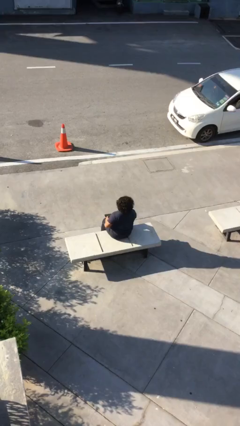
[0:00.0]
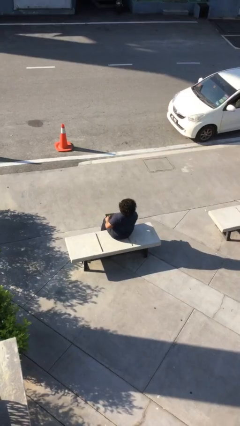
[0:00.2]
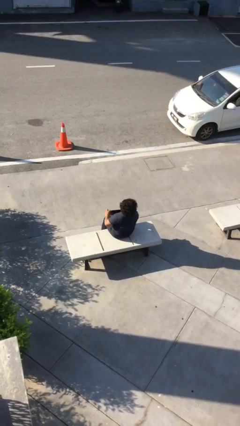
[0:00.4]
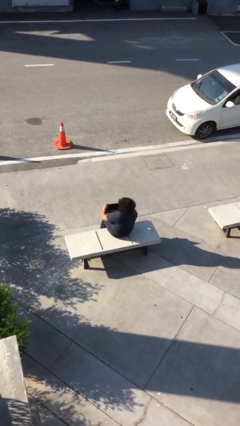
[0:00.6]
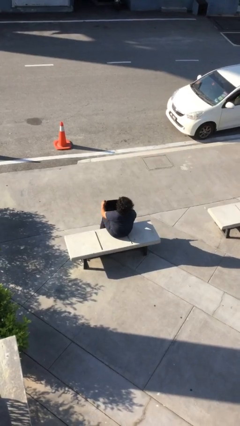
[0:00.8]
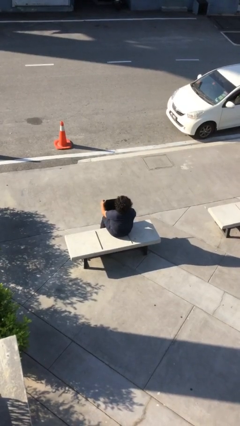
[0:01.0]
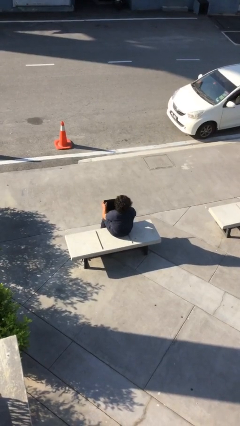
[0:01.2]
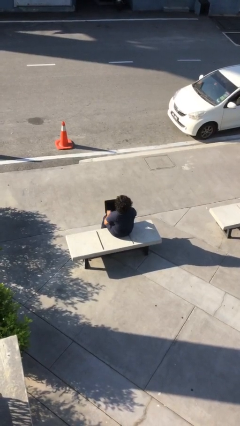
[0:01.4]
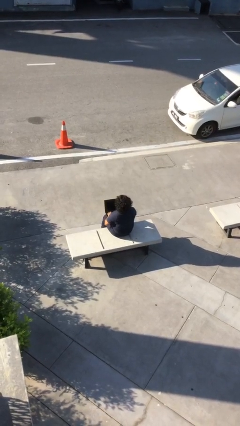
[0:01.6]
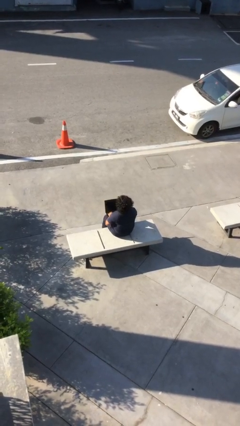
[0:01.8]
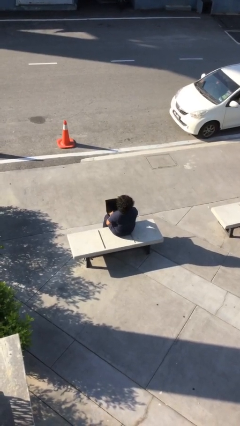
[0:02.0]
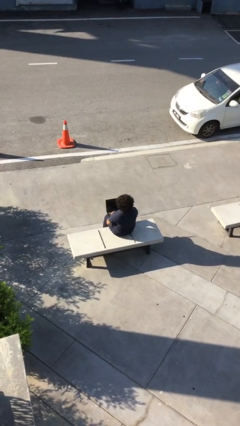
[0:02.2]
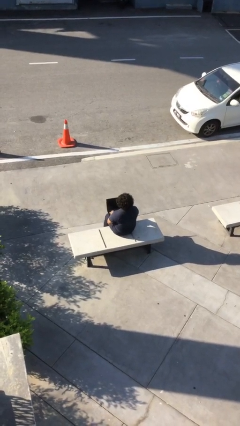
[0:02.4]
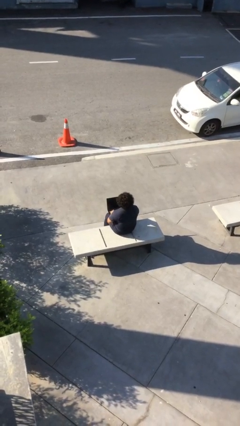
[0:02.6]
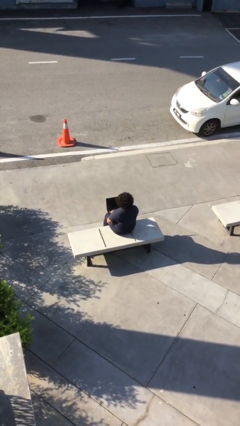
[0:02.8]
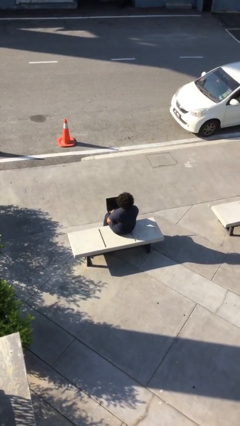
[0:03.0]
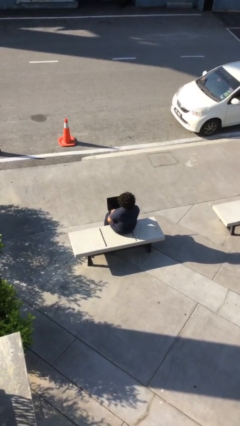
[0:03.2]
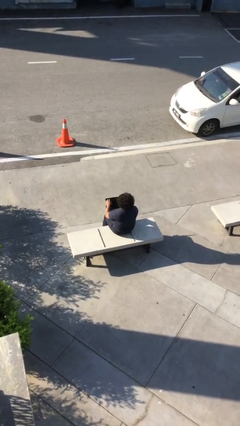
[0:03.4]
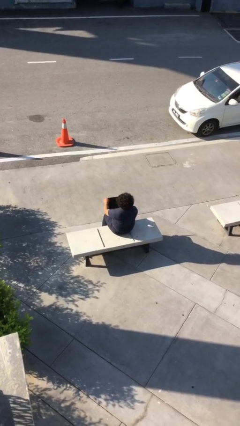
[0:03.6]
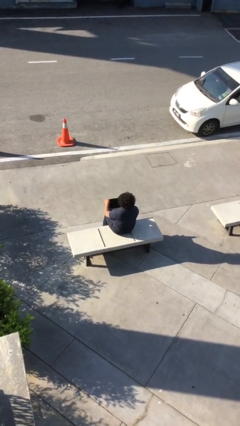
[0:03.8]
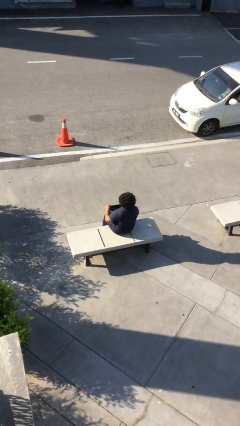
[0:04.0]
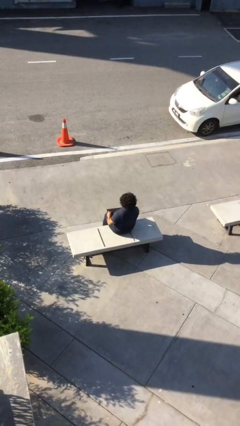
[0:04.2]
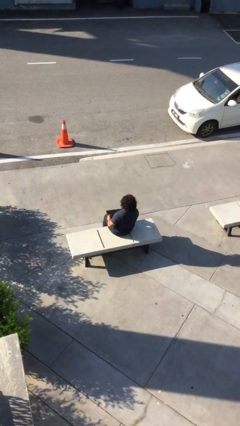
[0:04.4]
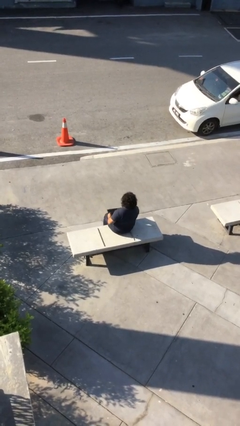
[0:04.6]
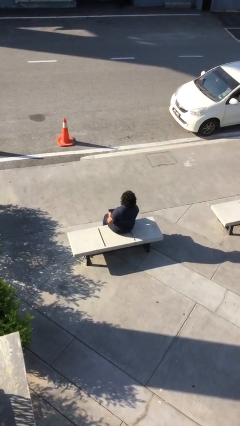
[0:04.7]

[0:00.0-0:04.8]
person interacts with laptop

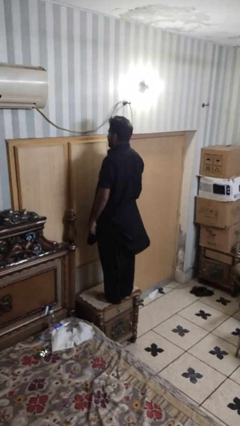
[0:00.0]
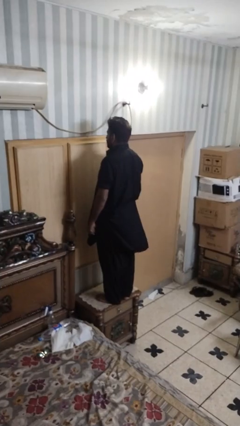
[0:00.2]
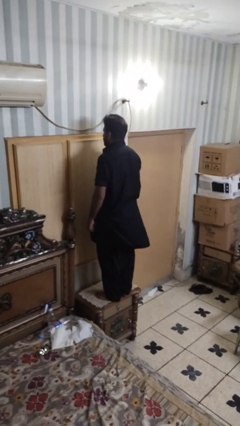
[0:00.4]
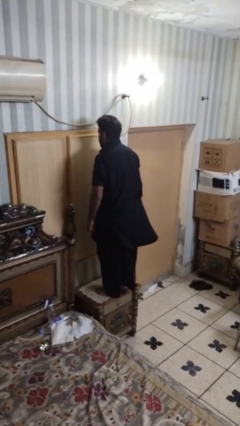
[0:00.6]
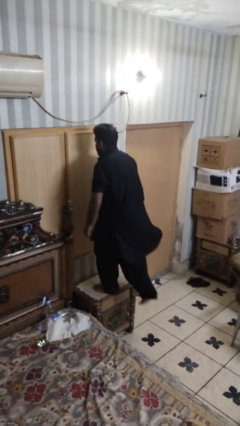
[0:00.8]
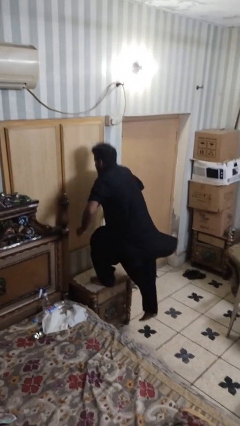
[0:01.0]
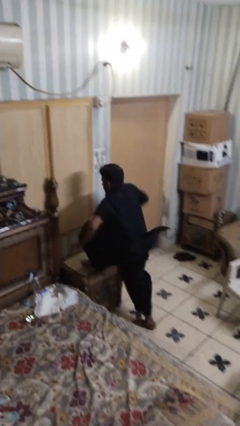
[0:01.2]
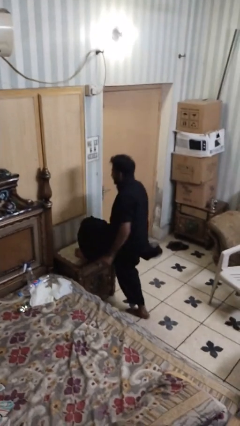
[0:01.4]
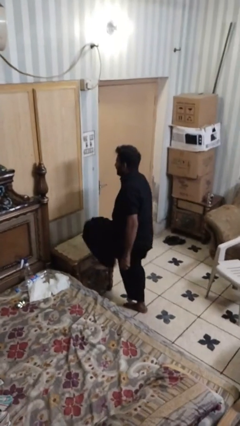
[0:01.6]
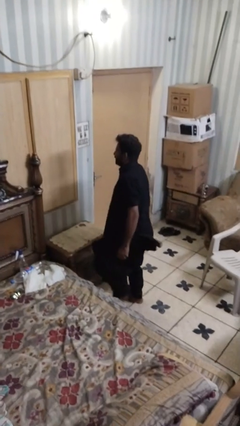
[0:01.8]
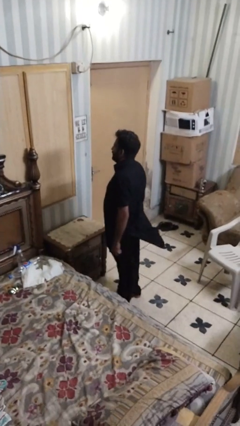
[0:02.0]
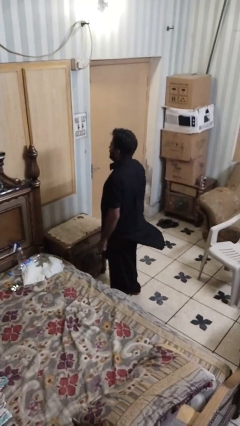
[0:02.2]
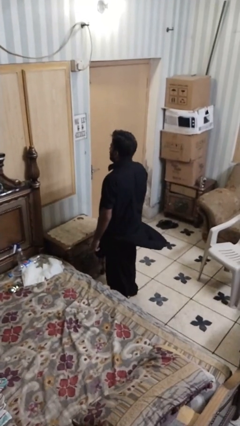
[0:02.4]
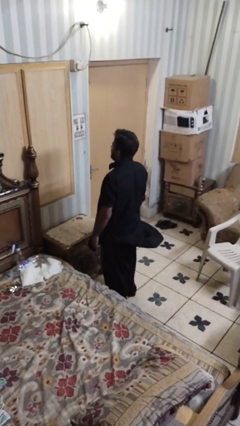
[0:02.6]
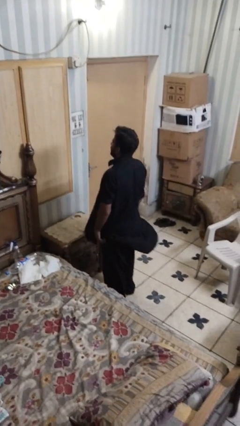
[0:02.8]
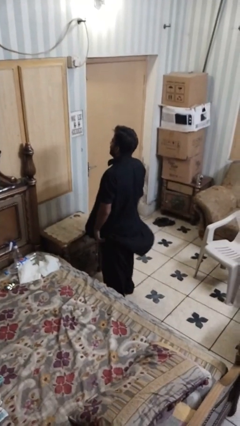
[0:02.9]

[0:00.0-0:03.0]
person climbs off table

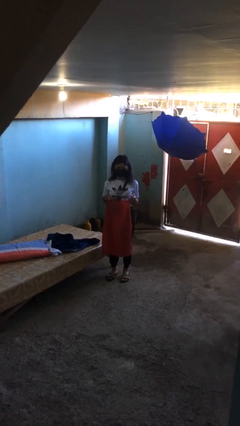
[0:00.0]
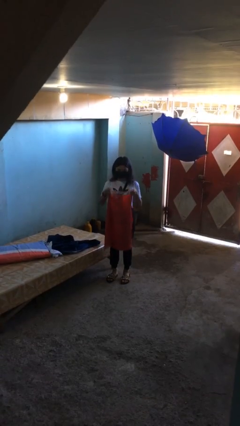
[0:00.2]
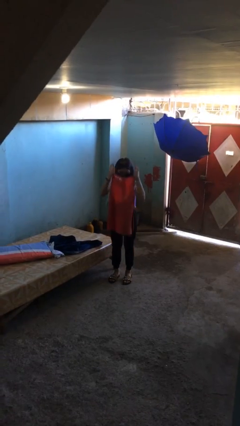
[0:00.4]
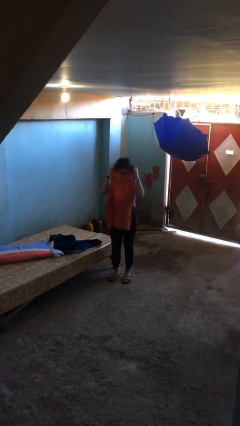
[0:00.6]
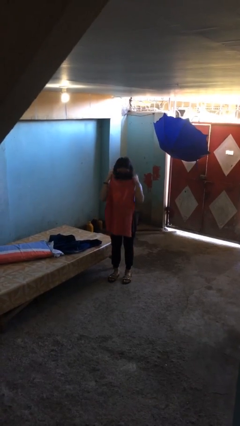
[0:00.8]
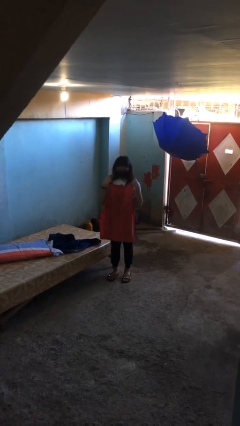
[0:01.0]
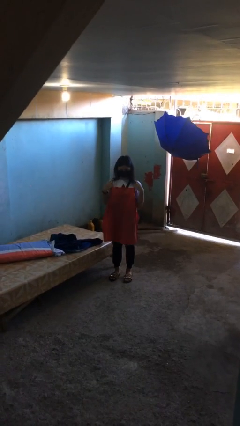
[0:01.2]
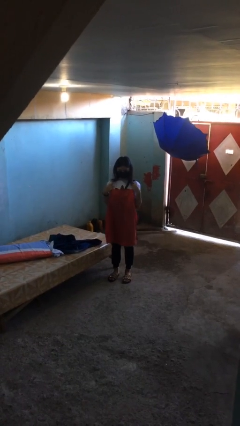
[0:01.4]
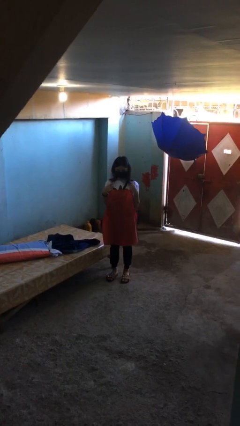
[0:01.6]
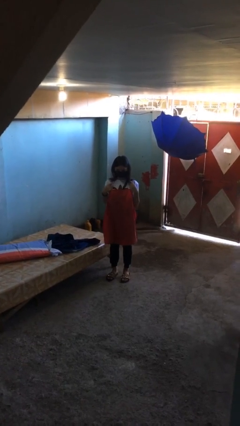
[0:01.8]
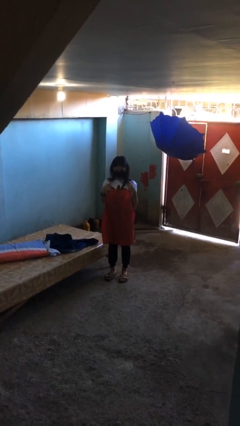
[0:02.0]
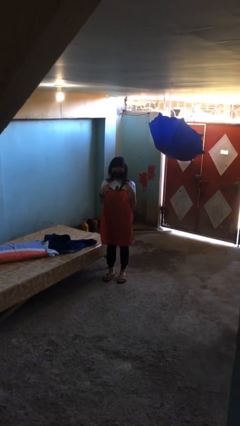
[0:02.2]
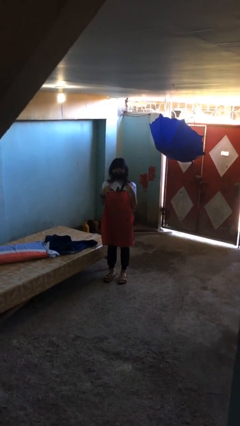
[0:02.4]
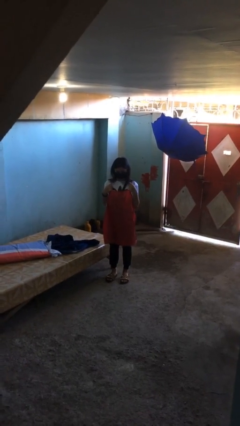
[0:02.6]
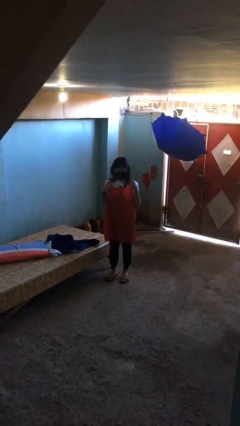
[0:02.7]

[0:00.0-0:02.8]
person puts on apron

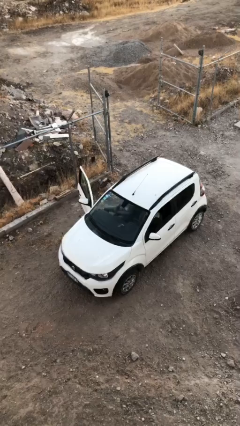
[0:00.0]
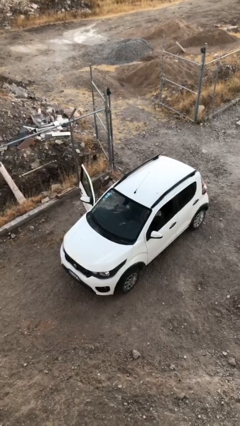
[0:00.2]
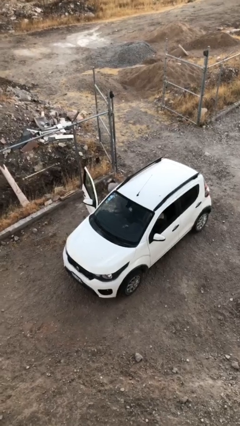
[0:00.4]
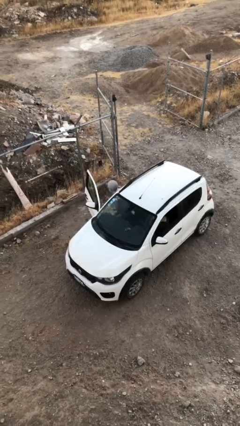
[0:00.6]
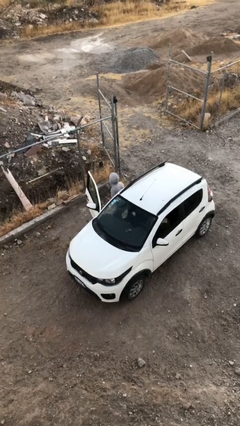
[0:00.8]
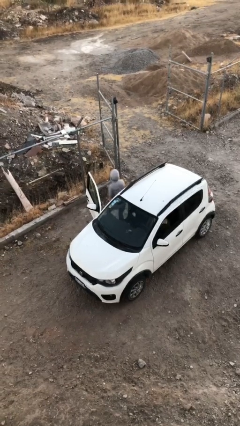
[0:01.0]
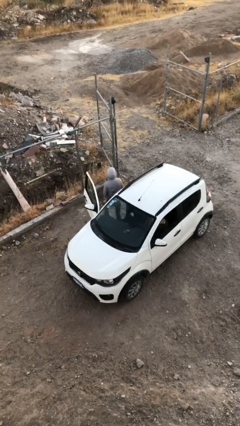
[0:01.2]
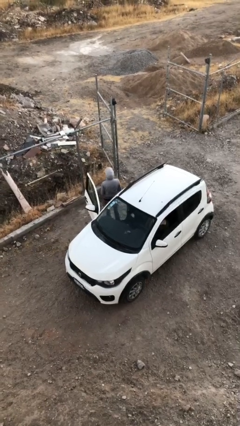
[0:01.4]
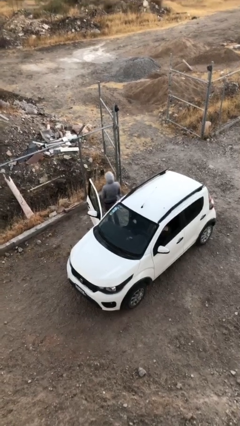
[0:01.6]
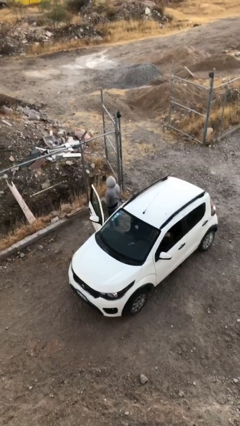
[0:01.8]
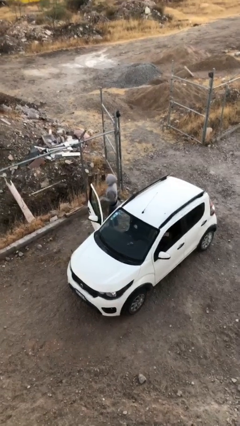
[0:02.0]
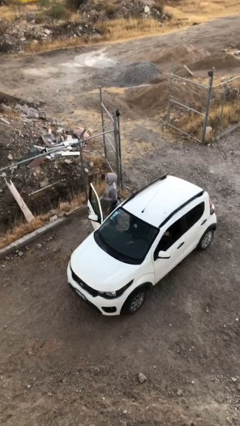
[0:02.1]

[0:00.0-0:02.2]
person exits car

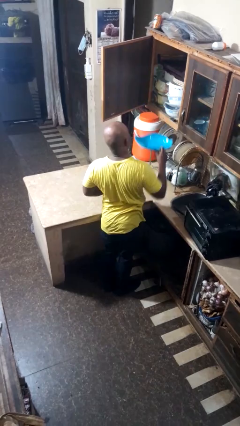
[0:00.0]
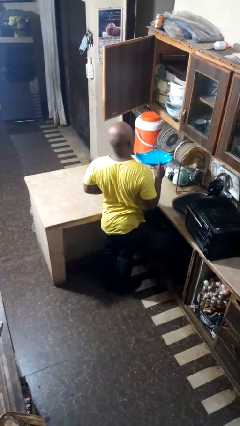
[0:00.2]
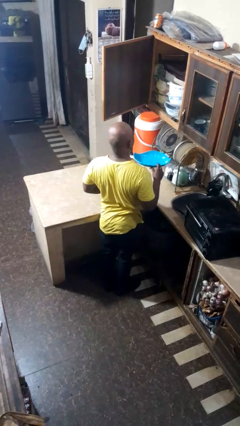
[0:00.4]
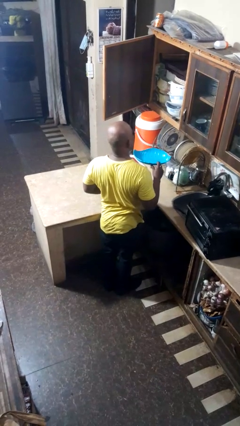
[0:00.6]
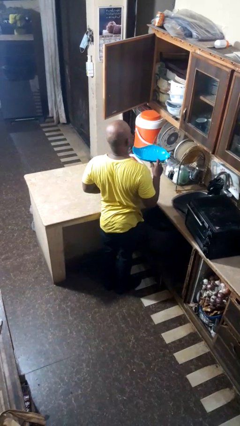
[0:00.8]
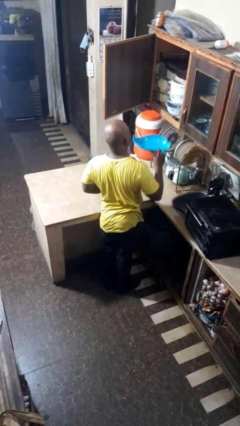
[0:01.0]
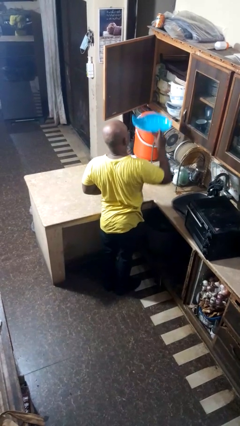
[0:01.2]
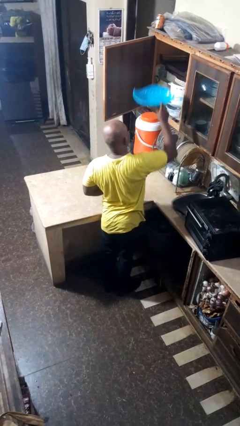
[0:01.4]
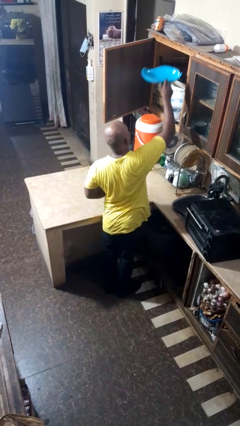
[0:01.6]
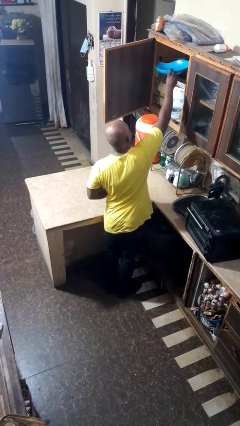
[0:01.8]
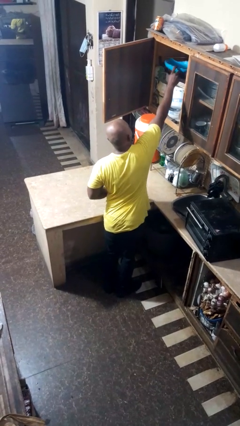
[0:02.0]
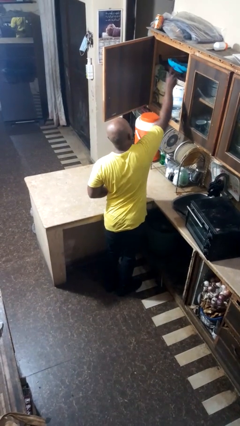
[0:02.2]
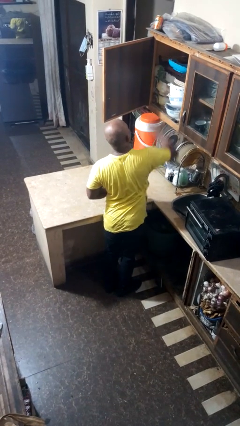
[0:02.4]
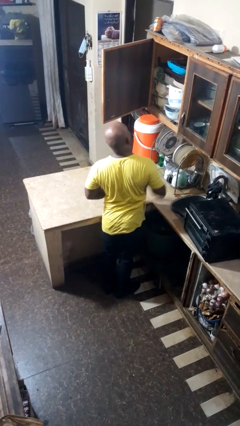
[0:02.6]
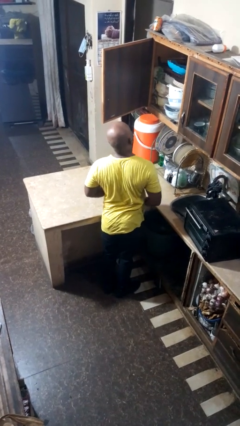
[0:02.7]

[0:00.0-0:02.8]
person puts object in cabinet

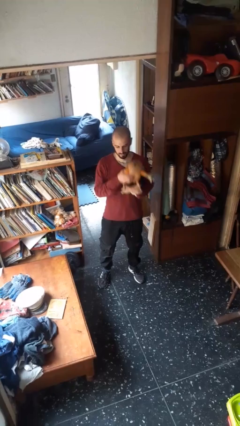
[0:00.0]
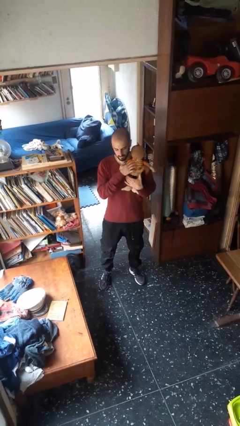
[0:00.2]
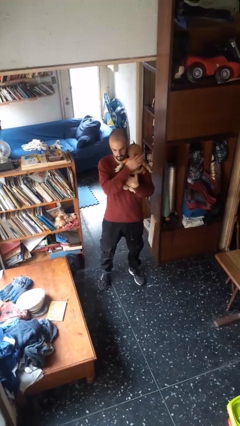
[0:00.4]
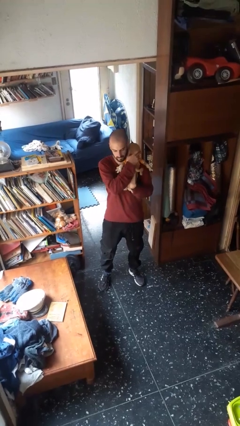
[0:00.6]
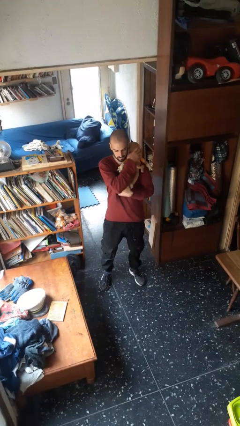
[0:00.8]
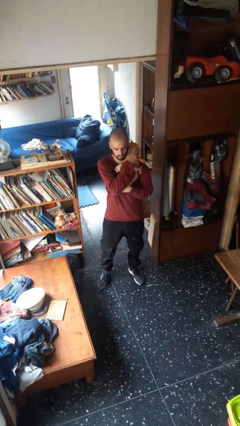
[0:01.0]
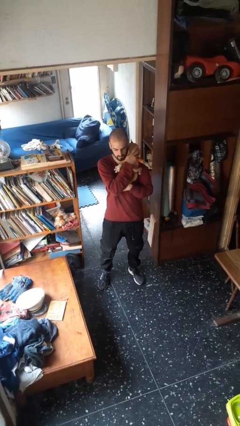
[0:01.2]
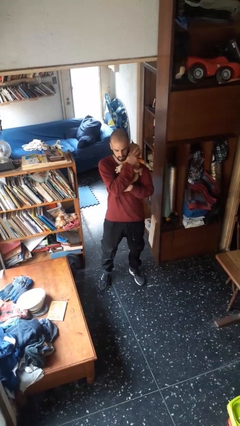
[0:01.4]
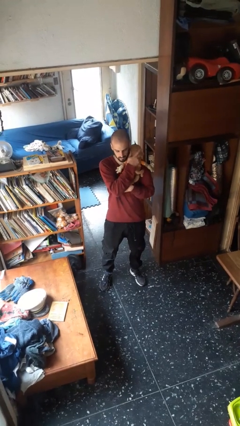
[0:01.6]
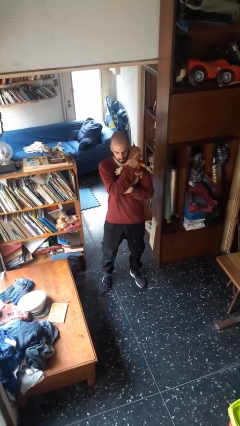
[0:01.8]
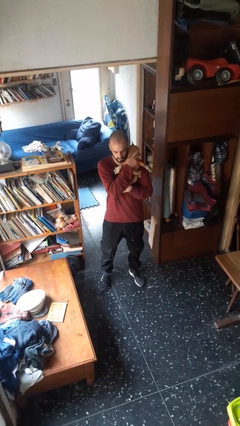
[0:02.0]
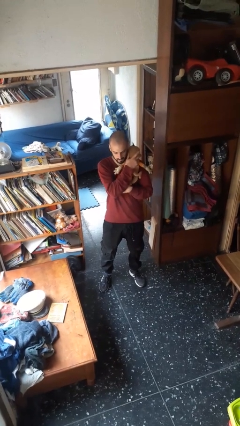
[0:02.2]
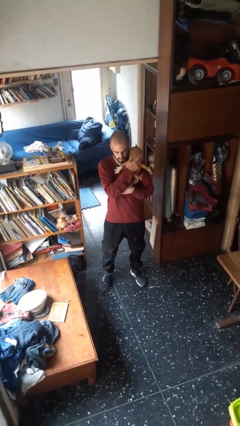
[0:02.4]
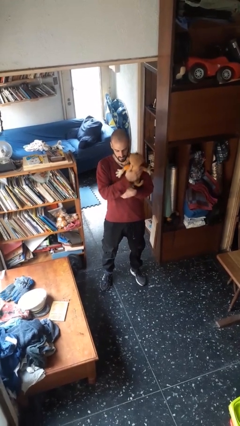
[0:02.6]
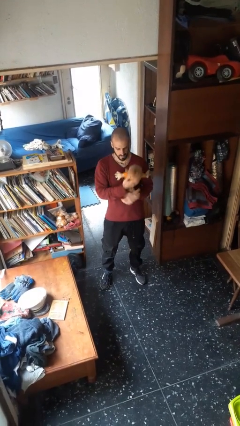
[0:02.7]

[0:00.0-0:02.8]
person hugs stuffed animal
